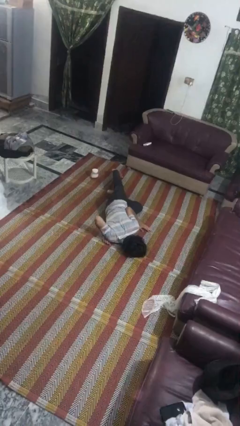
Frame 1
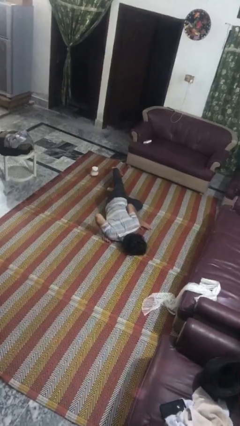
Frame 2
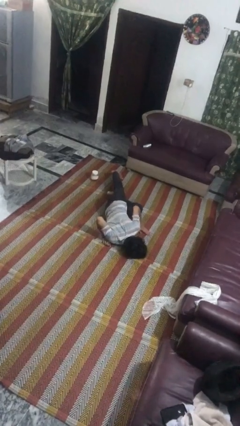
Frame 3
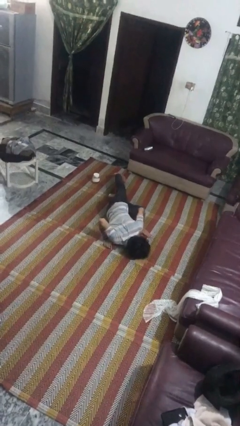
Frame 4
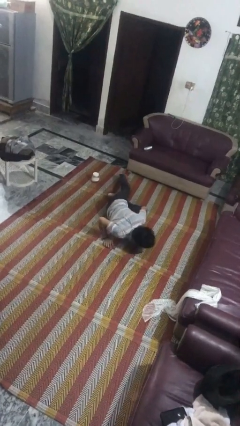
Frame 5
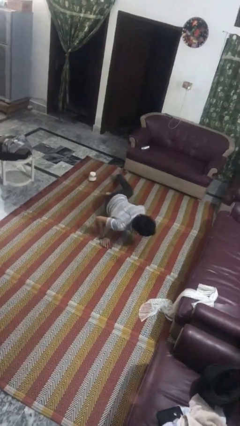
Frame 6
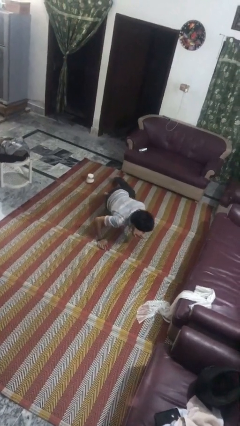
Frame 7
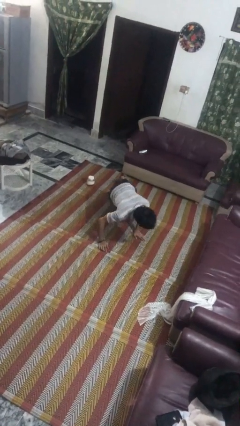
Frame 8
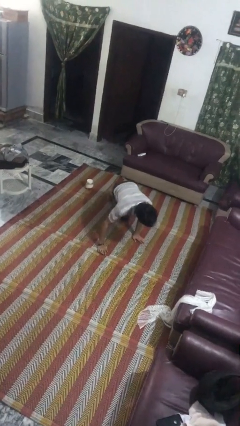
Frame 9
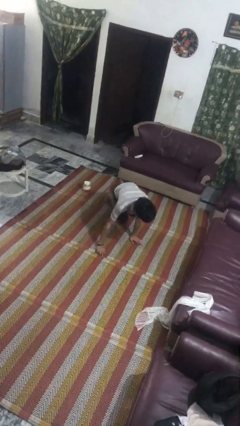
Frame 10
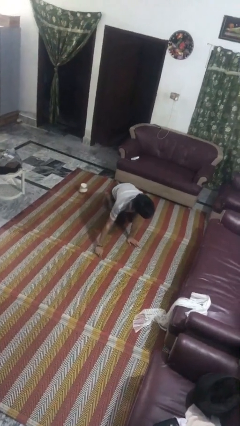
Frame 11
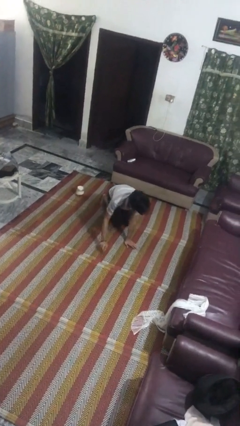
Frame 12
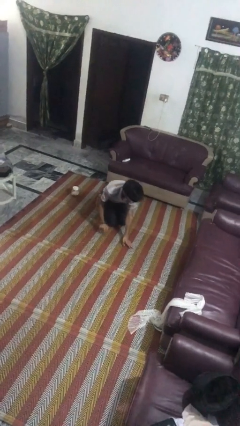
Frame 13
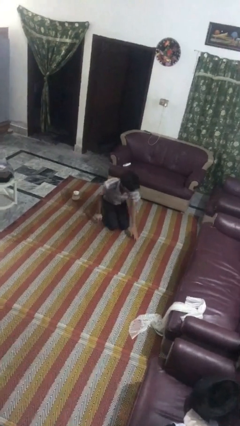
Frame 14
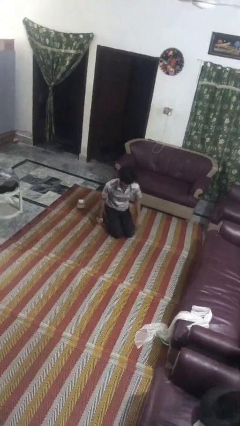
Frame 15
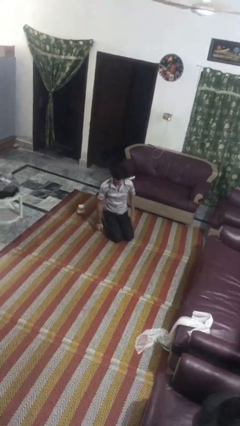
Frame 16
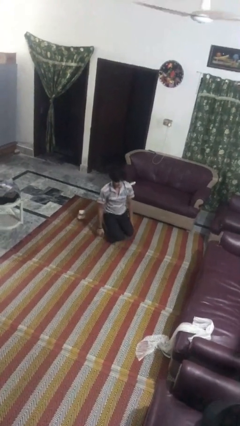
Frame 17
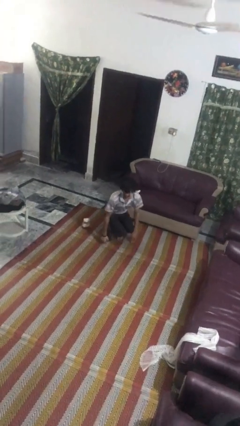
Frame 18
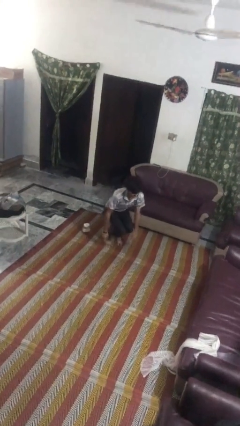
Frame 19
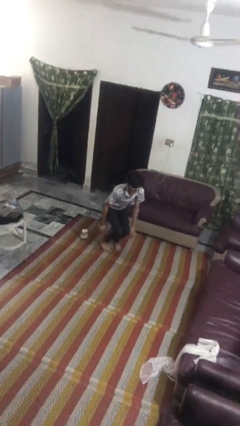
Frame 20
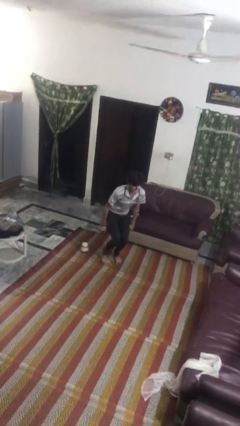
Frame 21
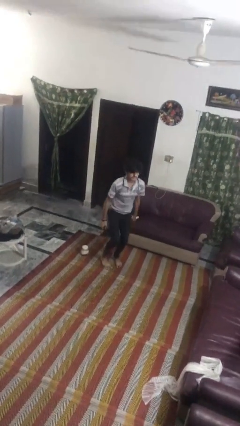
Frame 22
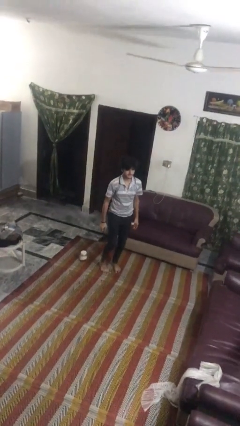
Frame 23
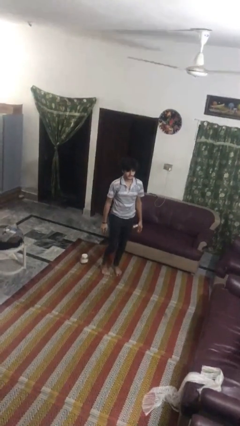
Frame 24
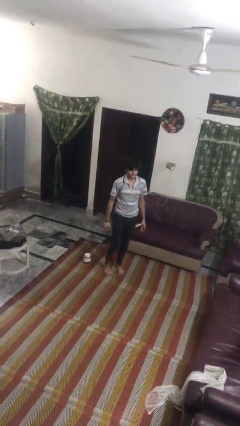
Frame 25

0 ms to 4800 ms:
person stands up from floor

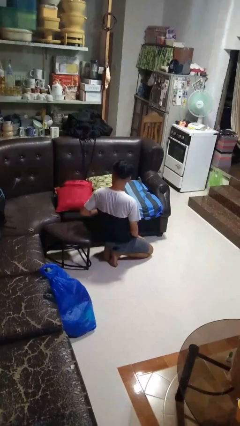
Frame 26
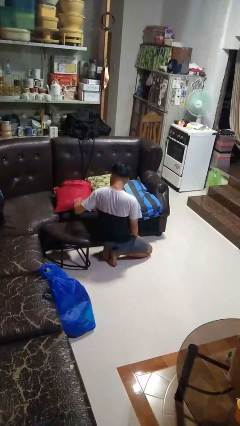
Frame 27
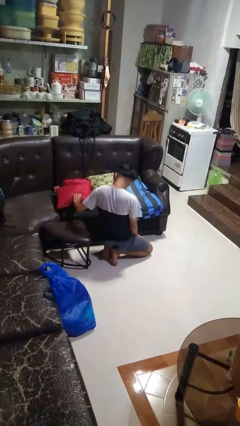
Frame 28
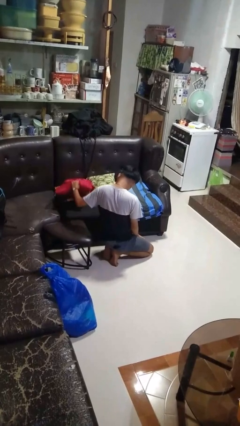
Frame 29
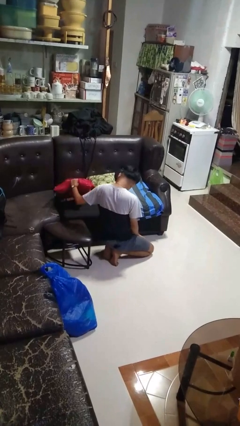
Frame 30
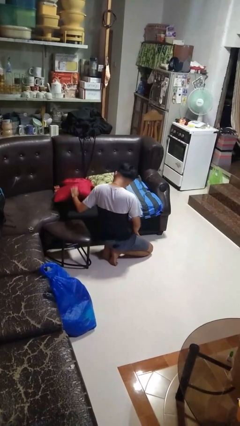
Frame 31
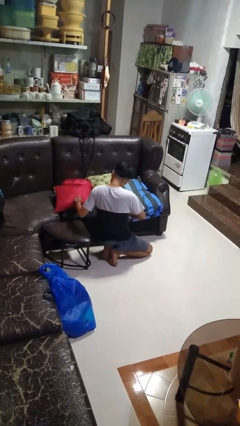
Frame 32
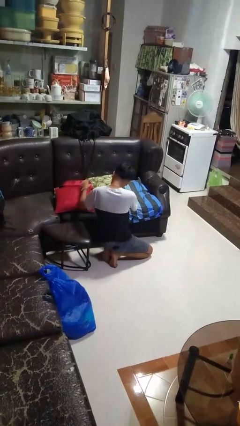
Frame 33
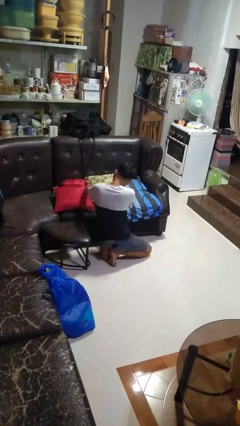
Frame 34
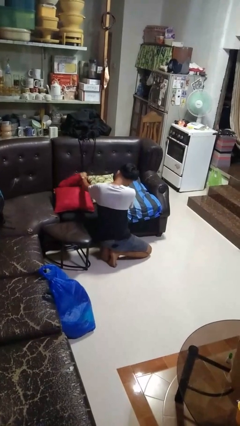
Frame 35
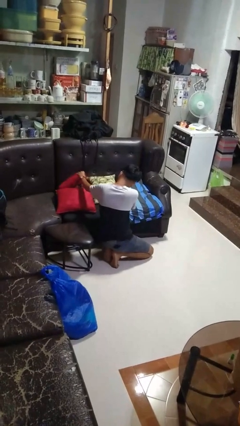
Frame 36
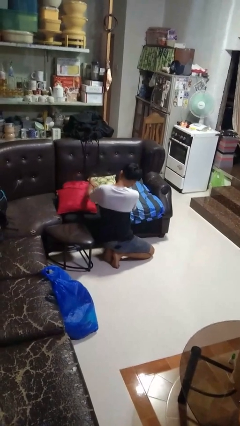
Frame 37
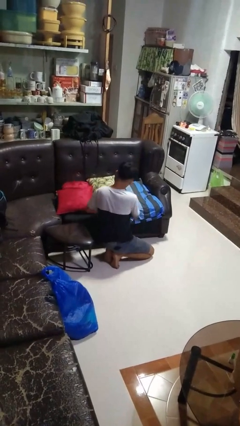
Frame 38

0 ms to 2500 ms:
person searches in couch

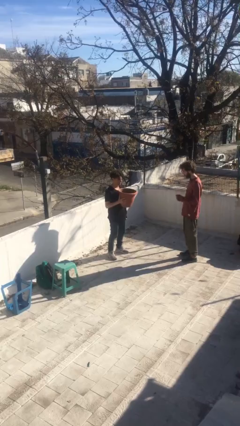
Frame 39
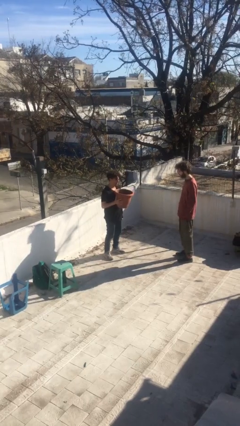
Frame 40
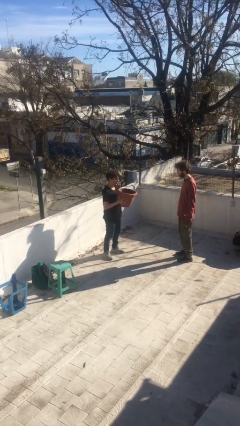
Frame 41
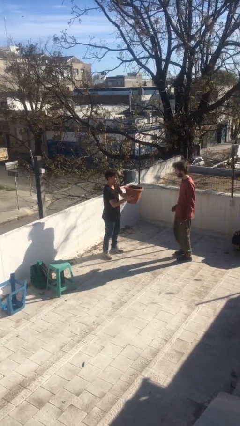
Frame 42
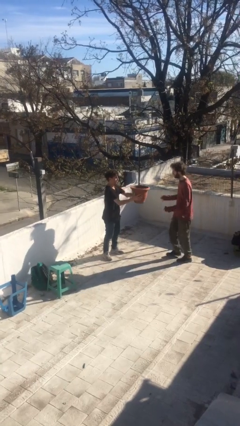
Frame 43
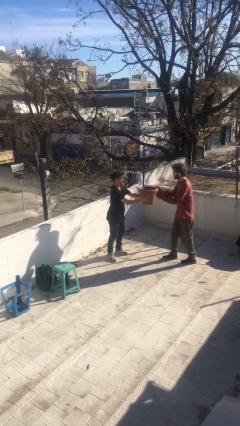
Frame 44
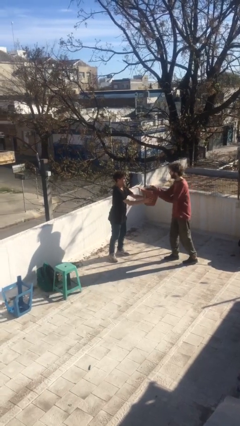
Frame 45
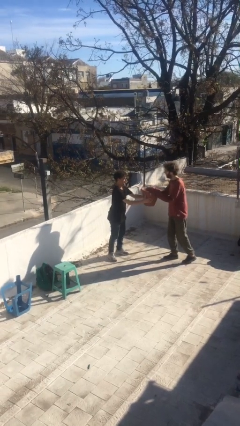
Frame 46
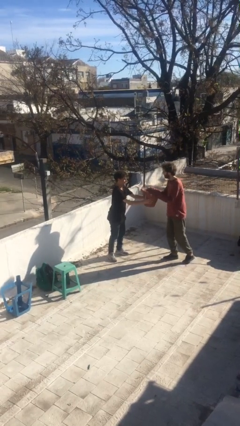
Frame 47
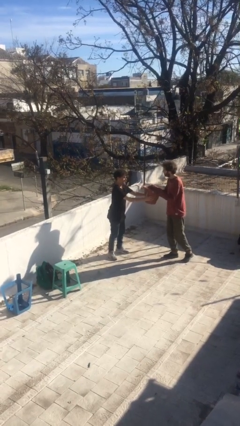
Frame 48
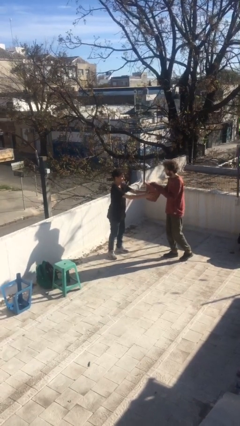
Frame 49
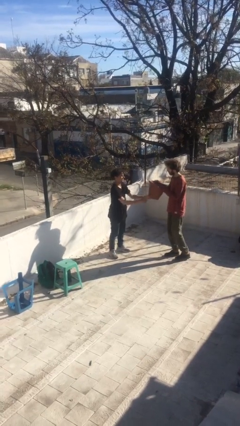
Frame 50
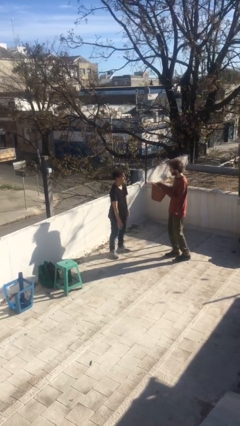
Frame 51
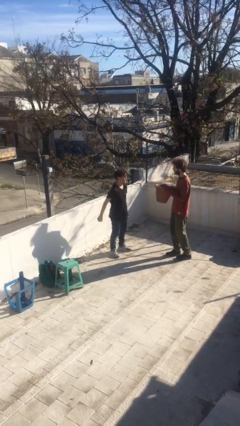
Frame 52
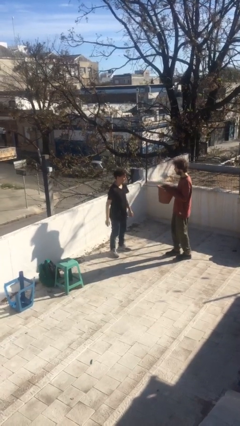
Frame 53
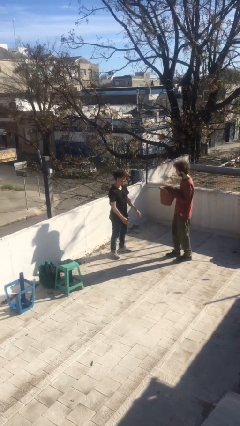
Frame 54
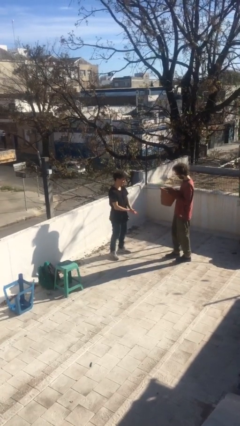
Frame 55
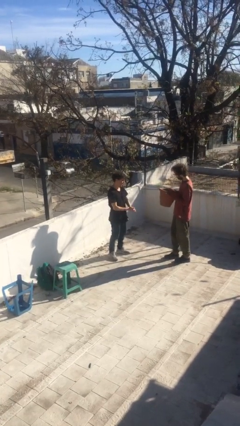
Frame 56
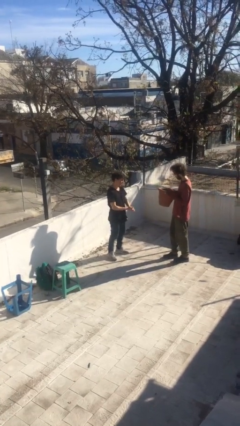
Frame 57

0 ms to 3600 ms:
person transfers object to person

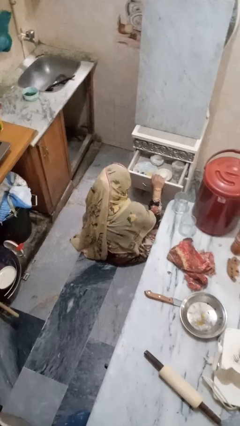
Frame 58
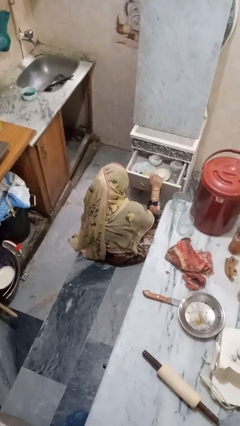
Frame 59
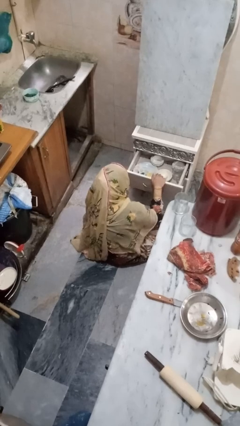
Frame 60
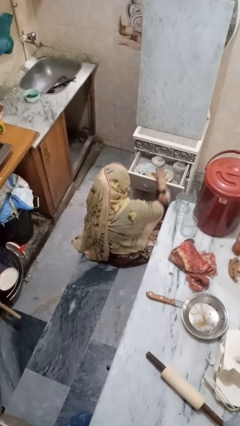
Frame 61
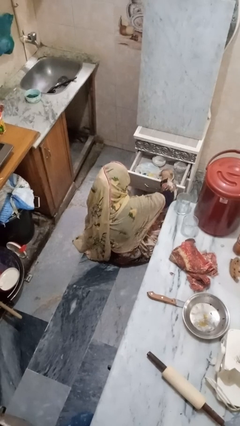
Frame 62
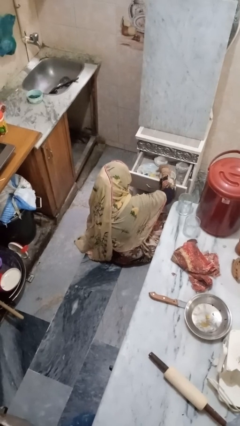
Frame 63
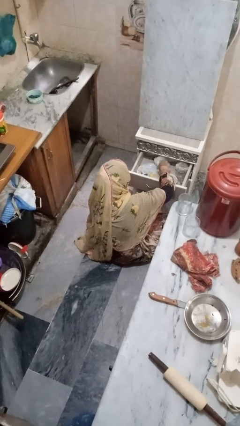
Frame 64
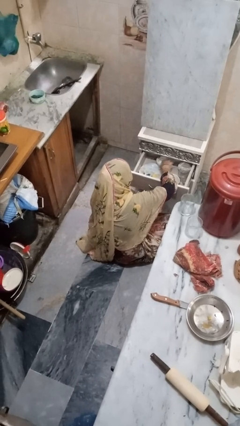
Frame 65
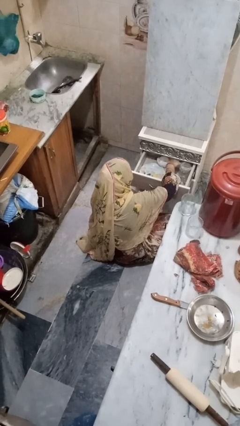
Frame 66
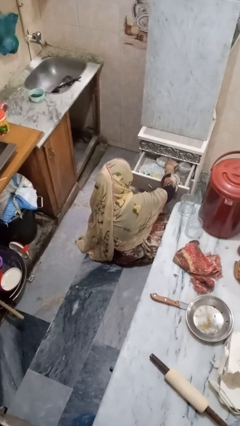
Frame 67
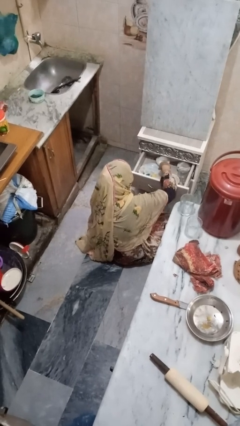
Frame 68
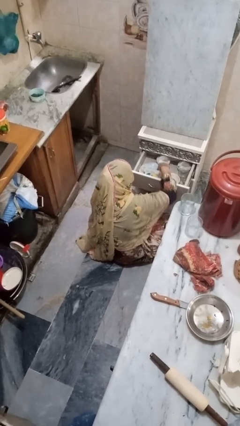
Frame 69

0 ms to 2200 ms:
person searches in kitchen drawer

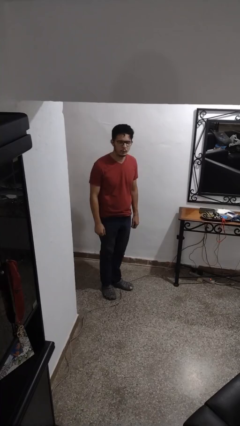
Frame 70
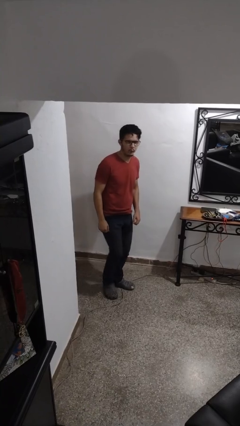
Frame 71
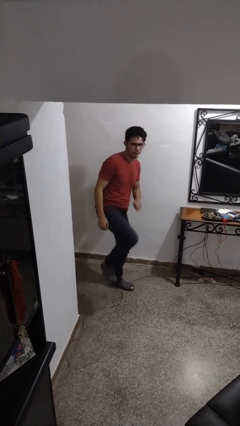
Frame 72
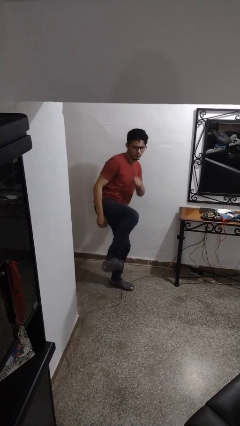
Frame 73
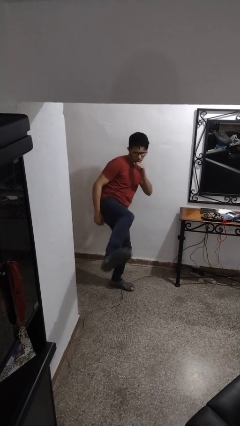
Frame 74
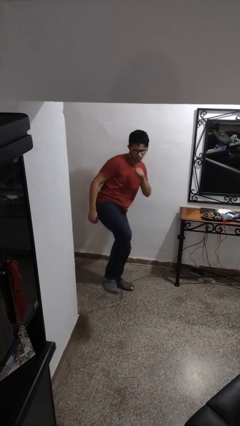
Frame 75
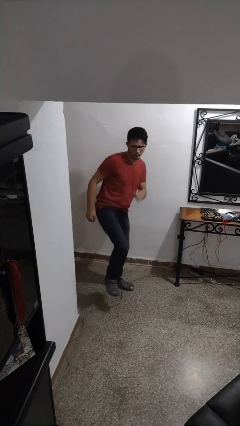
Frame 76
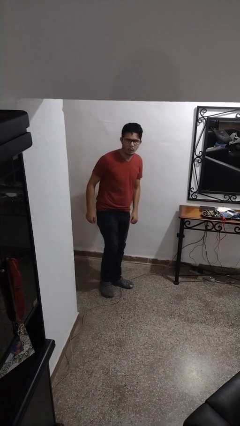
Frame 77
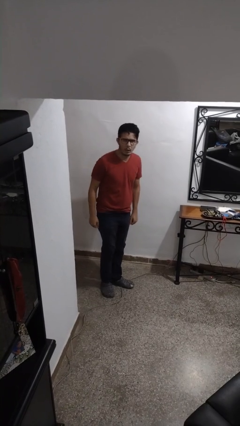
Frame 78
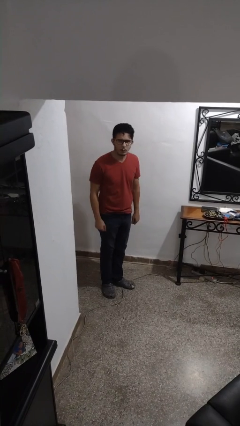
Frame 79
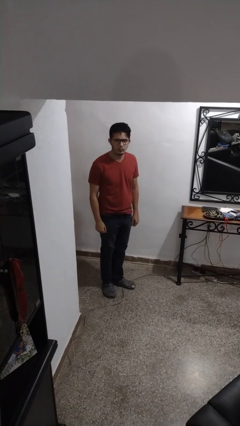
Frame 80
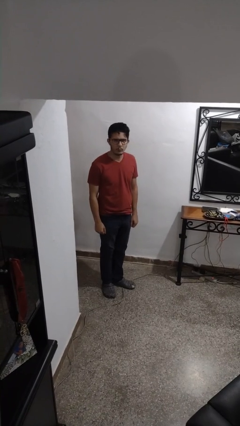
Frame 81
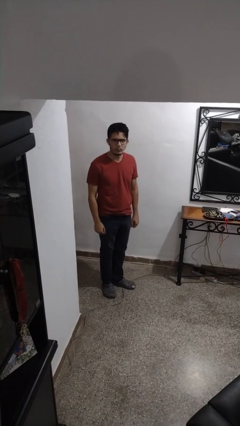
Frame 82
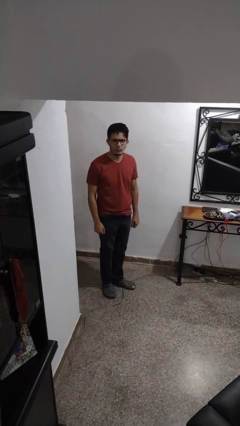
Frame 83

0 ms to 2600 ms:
person karate kicks

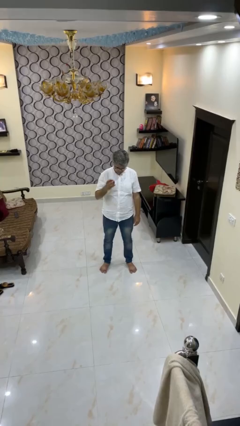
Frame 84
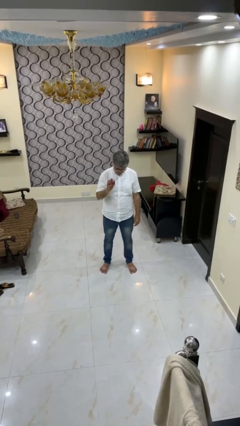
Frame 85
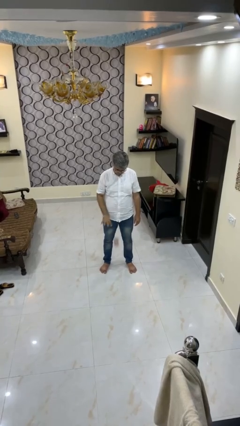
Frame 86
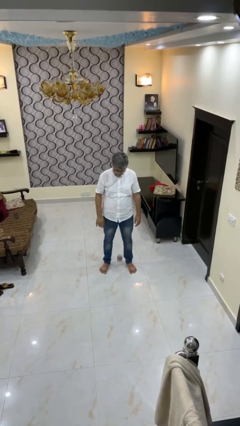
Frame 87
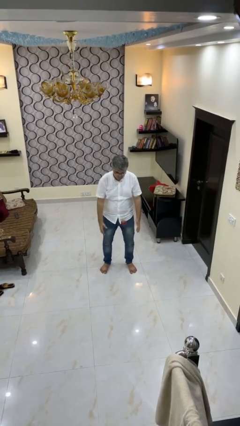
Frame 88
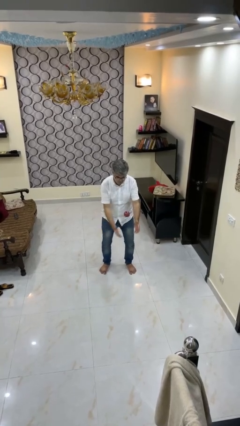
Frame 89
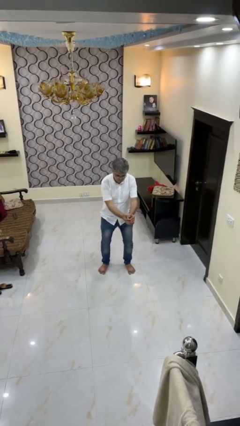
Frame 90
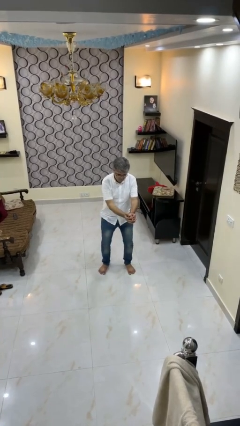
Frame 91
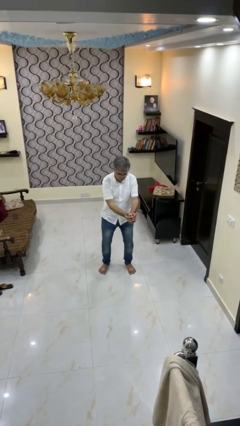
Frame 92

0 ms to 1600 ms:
person bounces ball on floor

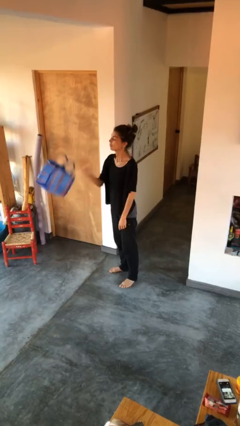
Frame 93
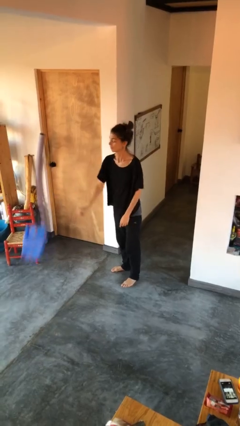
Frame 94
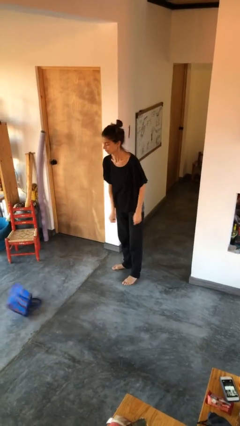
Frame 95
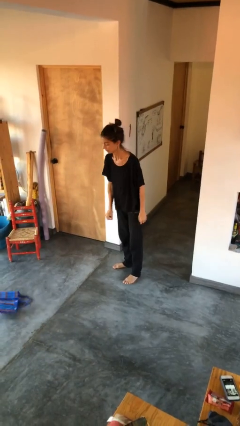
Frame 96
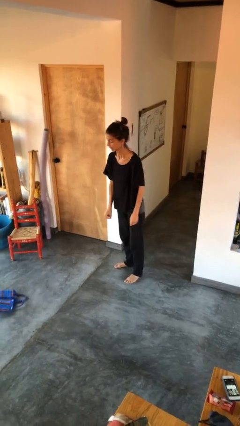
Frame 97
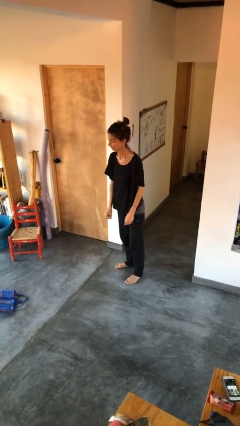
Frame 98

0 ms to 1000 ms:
person drops object
